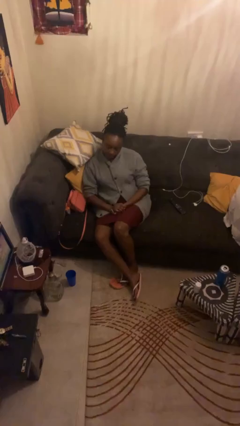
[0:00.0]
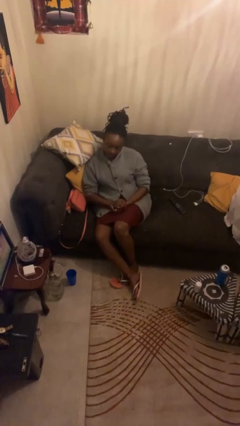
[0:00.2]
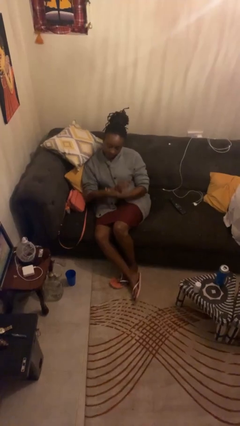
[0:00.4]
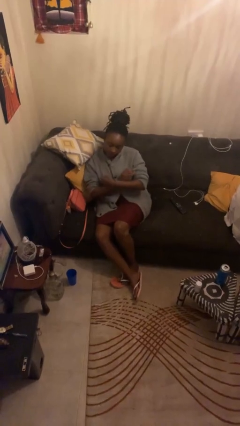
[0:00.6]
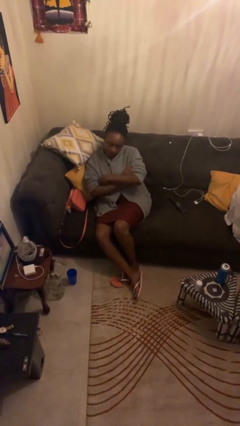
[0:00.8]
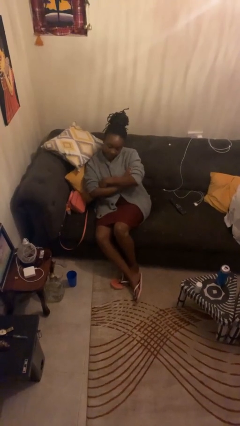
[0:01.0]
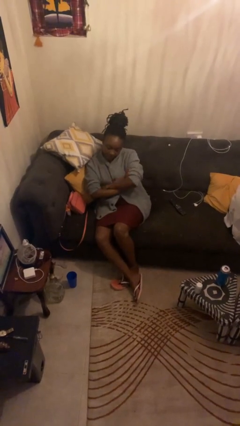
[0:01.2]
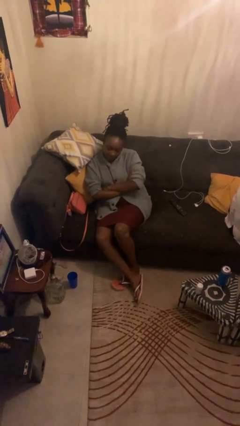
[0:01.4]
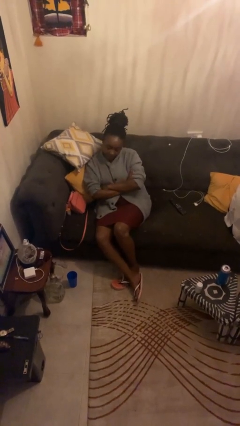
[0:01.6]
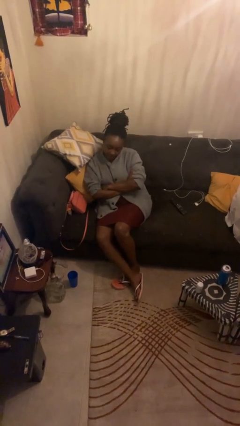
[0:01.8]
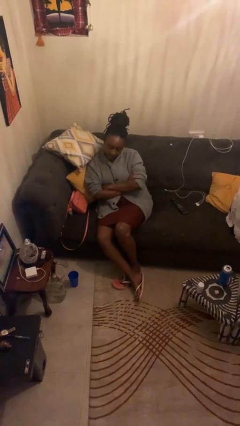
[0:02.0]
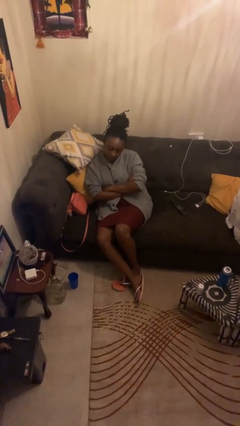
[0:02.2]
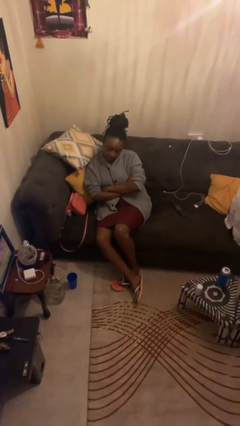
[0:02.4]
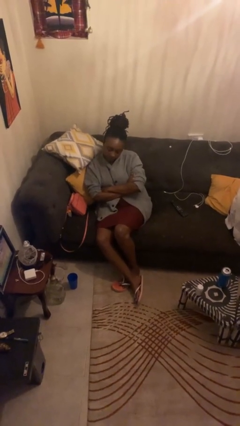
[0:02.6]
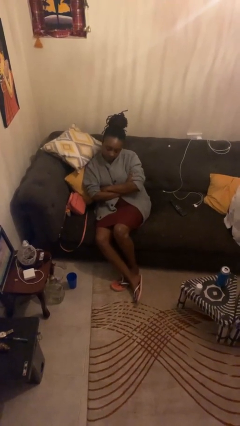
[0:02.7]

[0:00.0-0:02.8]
person crosses arms

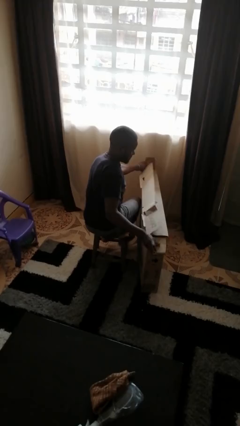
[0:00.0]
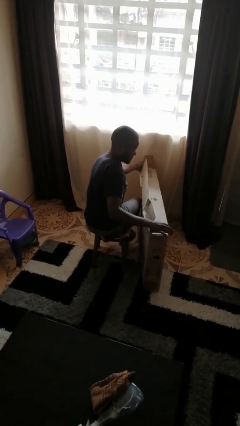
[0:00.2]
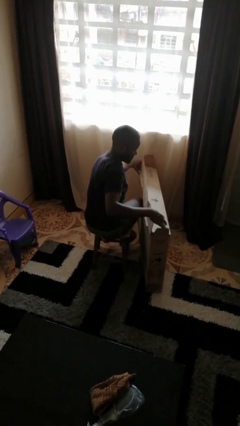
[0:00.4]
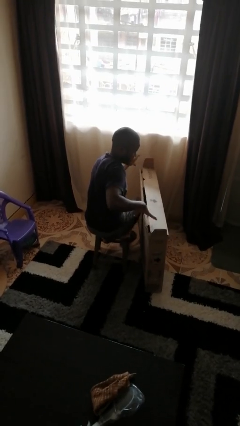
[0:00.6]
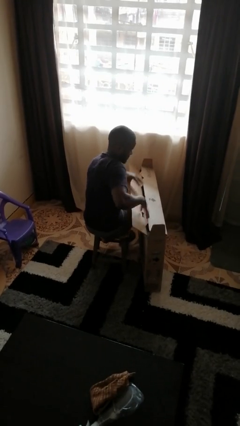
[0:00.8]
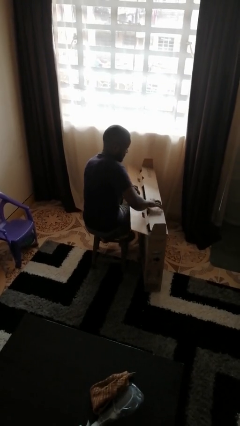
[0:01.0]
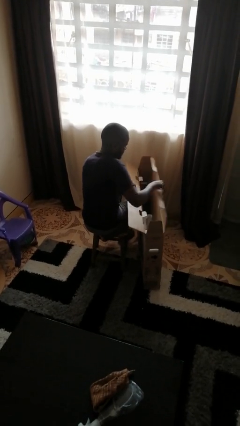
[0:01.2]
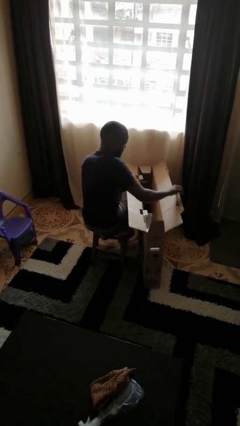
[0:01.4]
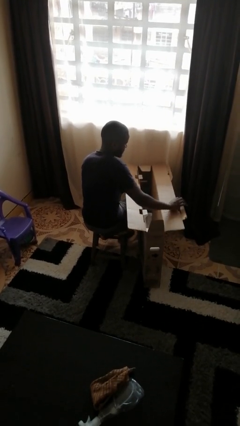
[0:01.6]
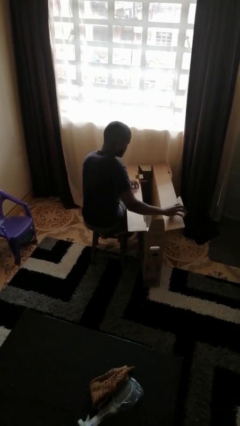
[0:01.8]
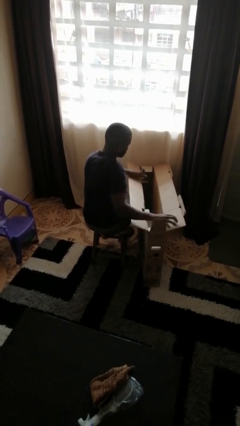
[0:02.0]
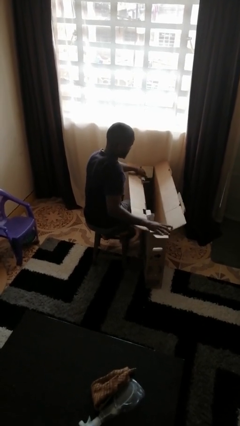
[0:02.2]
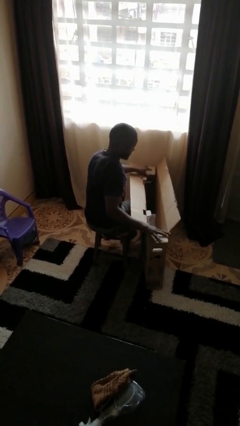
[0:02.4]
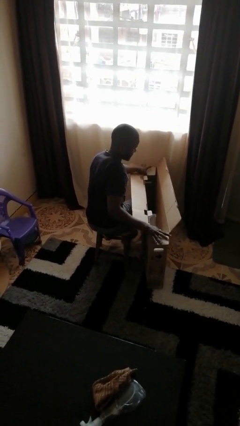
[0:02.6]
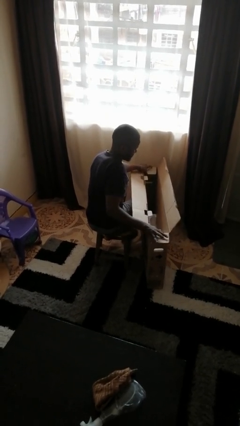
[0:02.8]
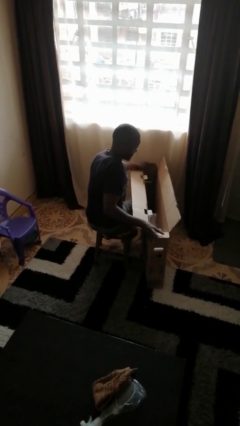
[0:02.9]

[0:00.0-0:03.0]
person opens box

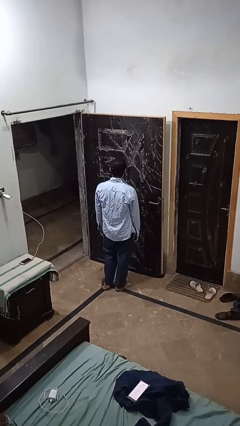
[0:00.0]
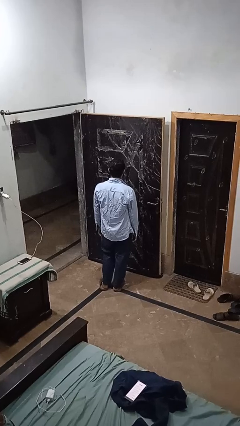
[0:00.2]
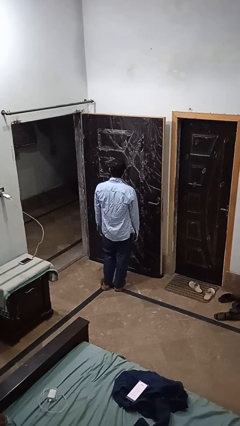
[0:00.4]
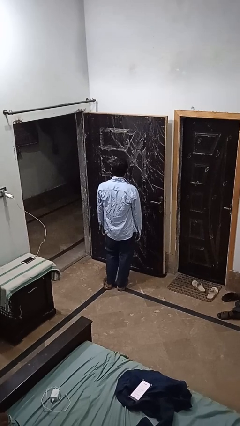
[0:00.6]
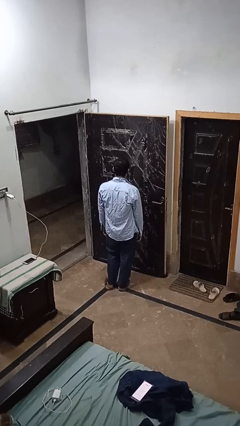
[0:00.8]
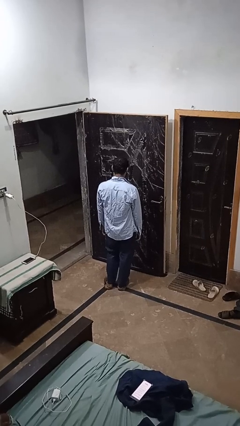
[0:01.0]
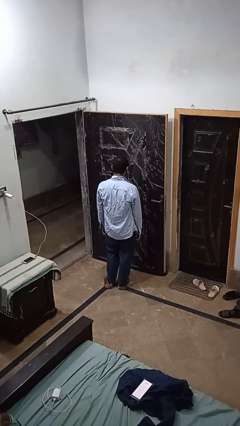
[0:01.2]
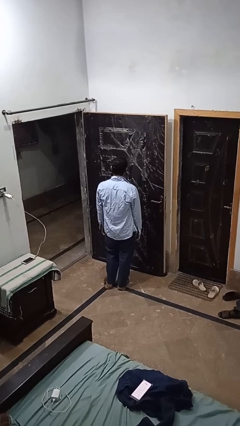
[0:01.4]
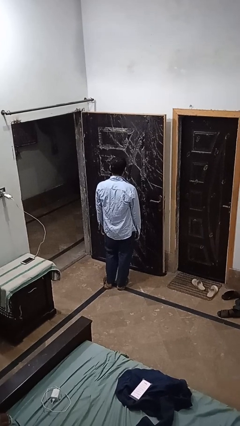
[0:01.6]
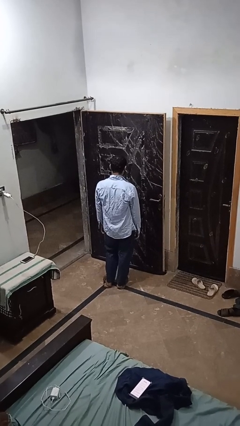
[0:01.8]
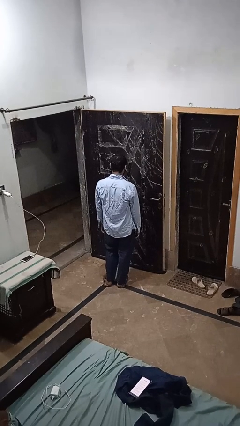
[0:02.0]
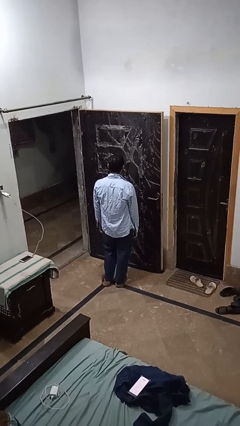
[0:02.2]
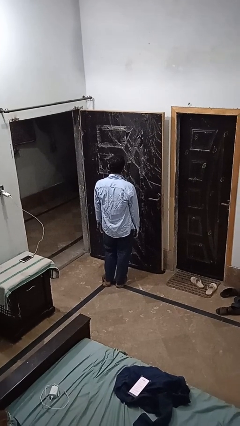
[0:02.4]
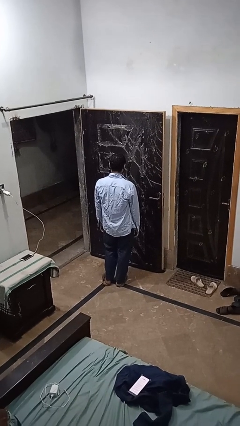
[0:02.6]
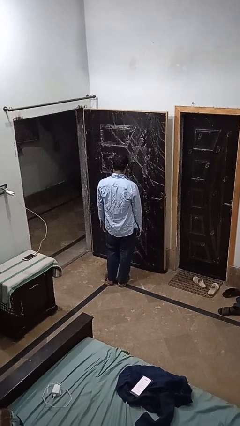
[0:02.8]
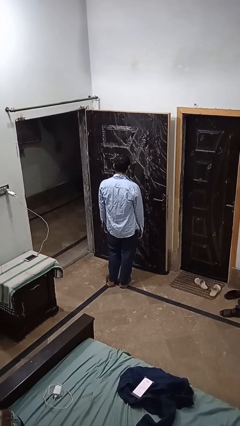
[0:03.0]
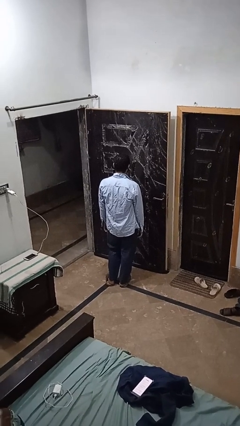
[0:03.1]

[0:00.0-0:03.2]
person nods head

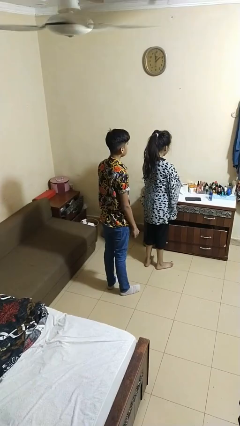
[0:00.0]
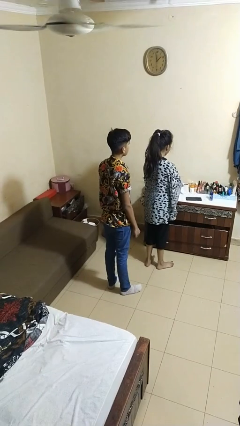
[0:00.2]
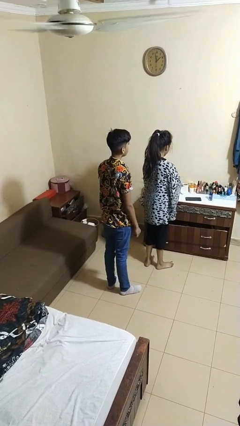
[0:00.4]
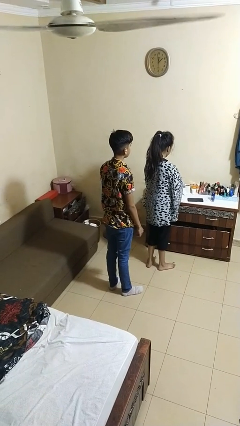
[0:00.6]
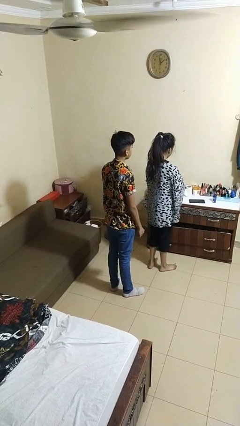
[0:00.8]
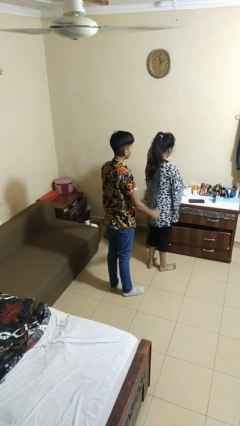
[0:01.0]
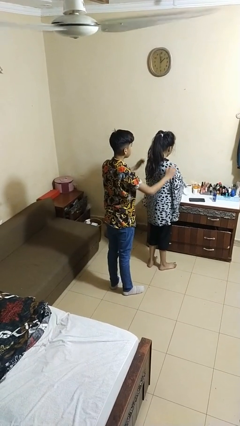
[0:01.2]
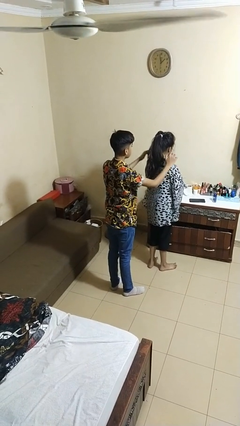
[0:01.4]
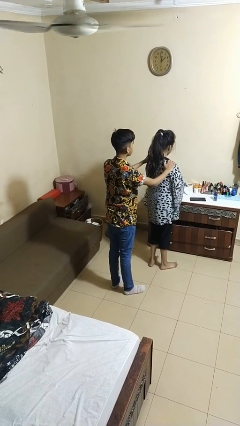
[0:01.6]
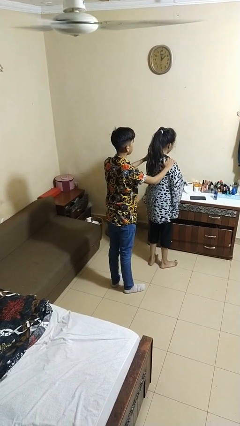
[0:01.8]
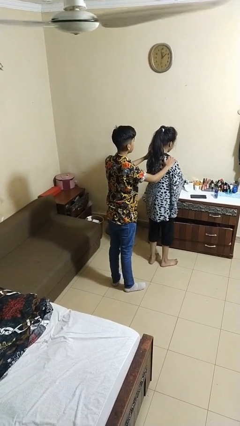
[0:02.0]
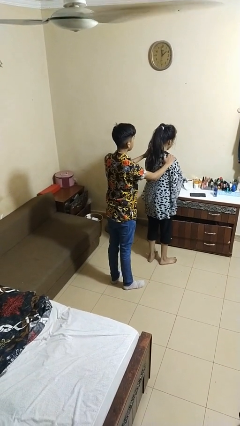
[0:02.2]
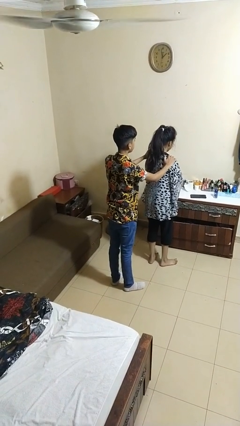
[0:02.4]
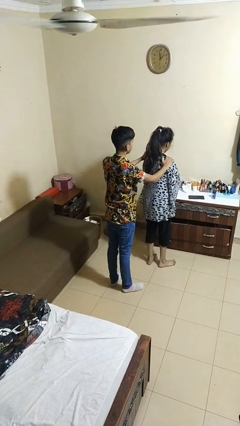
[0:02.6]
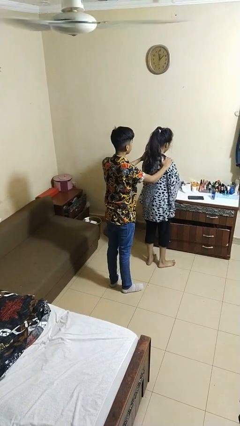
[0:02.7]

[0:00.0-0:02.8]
person grabs person by shoulder

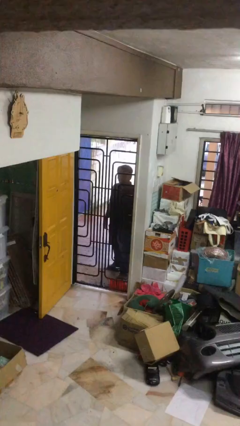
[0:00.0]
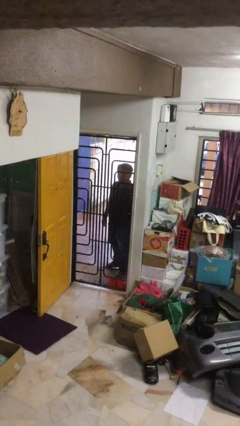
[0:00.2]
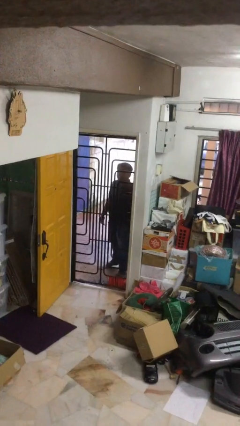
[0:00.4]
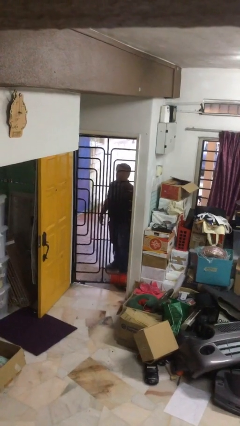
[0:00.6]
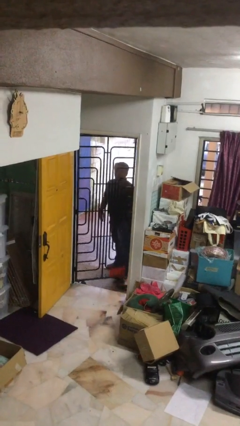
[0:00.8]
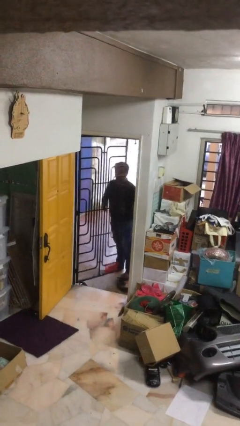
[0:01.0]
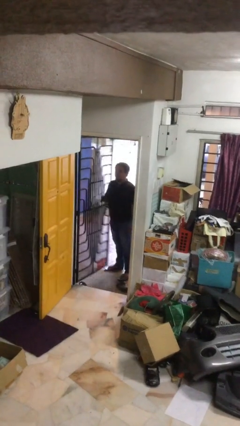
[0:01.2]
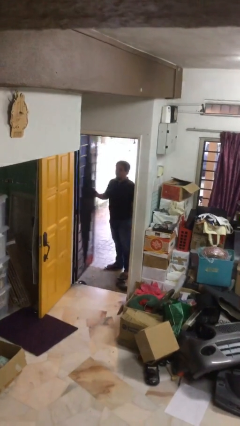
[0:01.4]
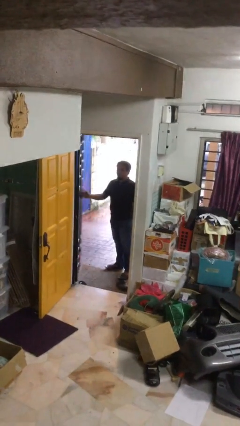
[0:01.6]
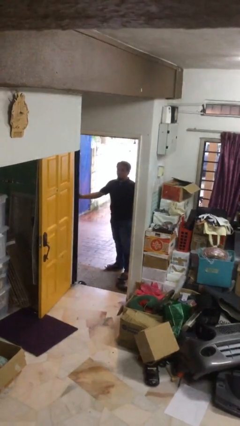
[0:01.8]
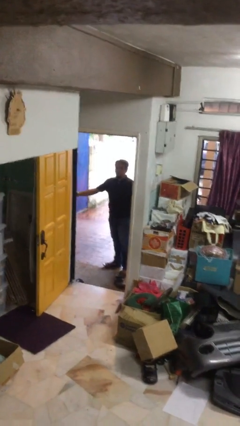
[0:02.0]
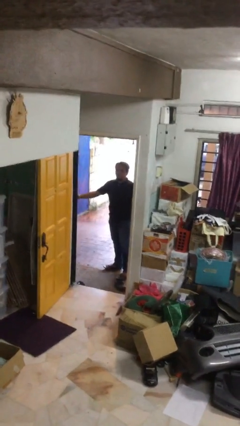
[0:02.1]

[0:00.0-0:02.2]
person opens facility door

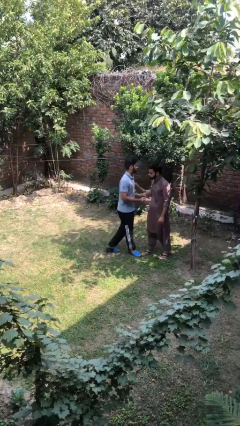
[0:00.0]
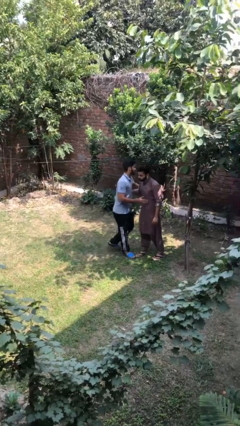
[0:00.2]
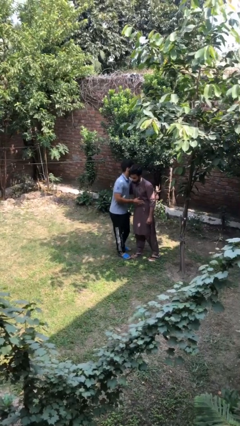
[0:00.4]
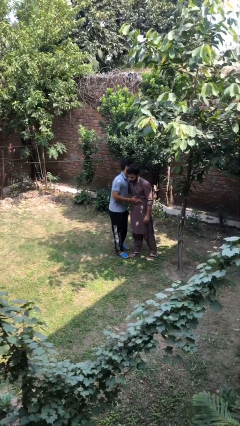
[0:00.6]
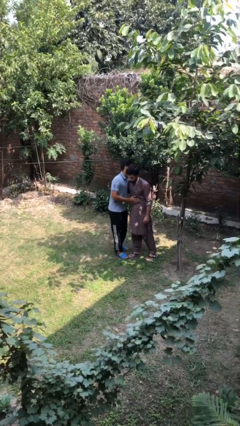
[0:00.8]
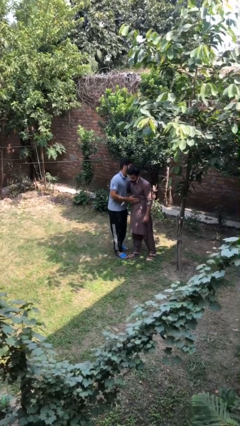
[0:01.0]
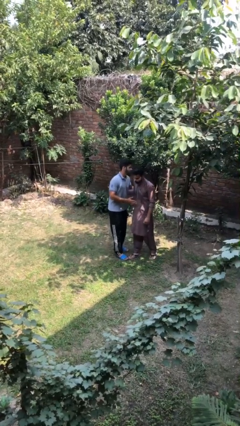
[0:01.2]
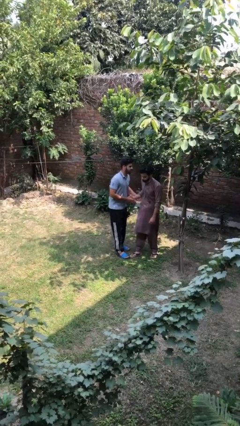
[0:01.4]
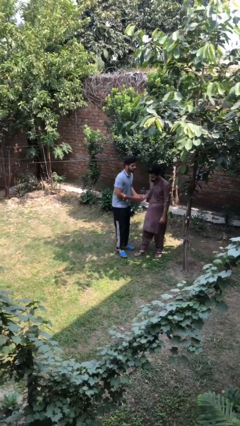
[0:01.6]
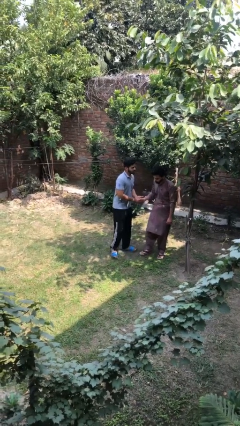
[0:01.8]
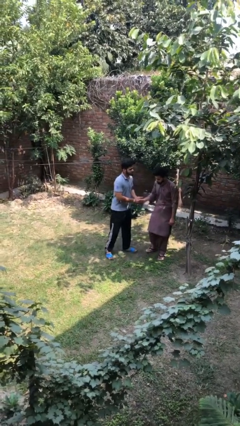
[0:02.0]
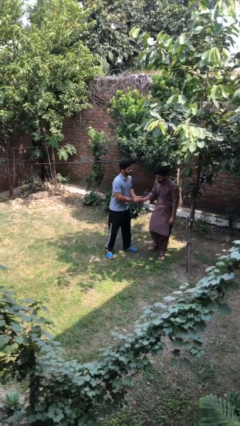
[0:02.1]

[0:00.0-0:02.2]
person embraces person

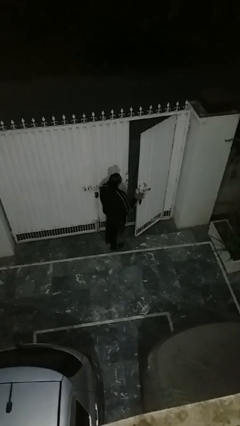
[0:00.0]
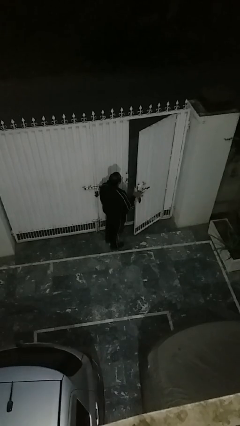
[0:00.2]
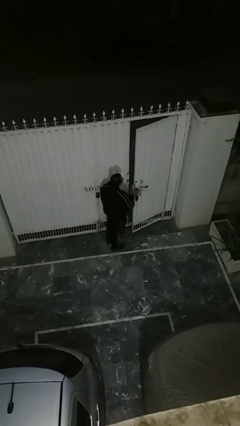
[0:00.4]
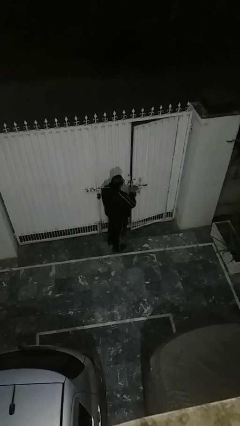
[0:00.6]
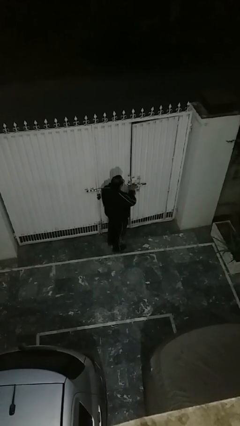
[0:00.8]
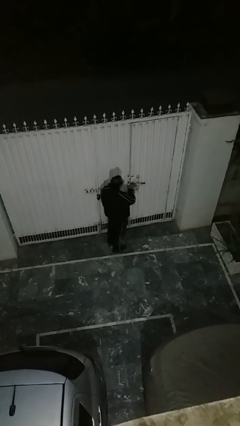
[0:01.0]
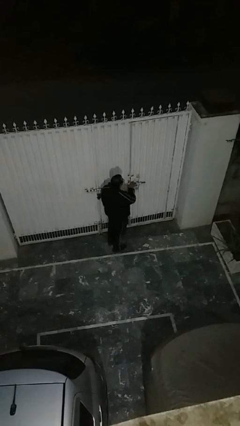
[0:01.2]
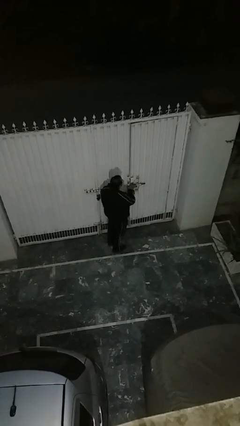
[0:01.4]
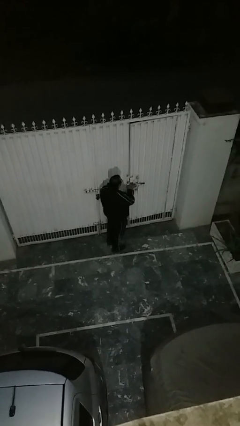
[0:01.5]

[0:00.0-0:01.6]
person closes facility door
